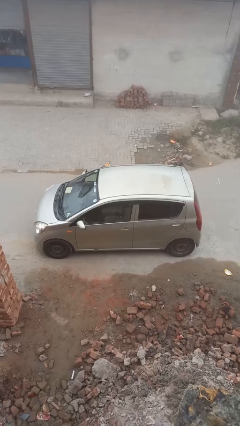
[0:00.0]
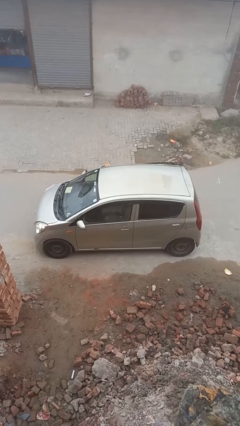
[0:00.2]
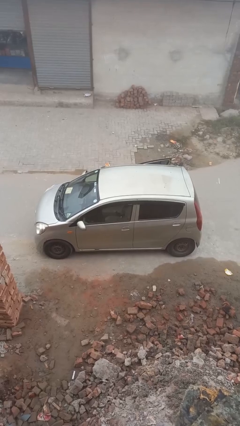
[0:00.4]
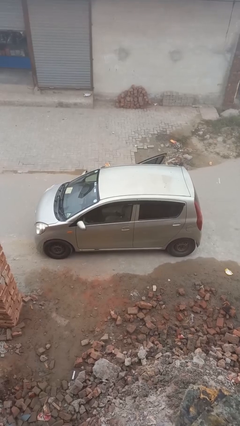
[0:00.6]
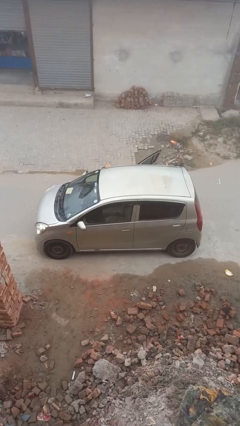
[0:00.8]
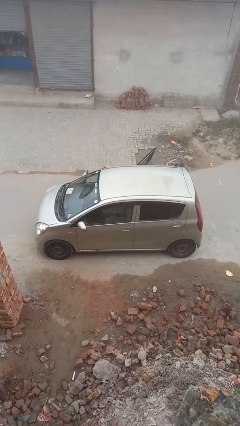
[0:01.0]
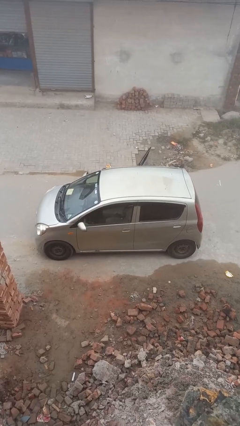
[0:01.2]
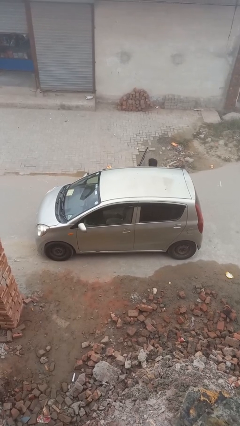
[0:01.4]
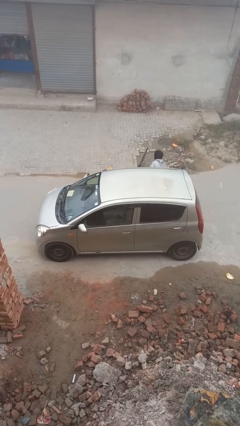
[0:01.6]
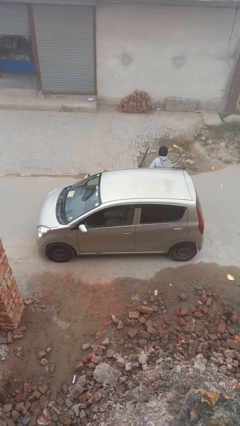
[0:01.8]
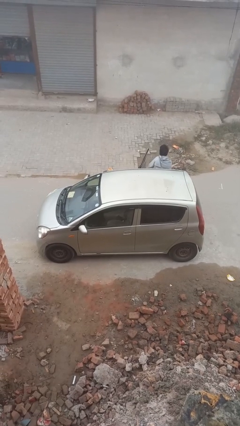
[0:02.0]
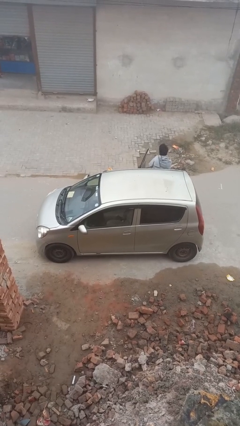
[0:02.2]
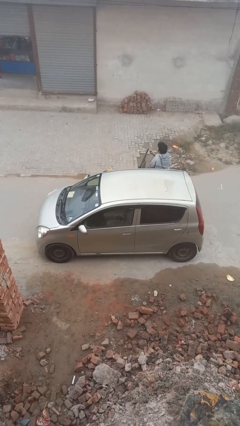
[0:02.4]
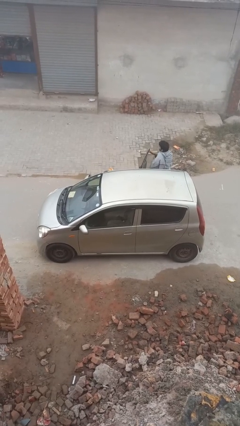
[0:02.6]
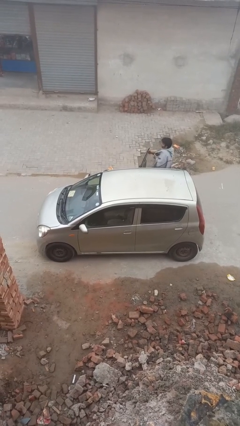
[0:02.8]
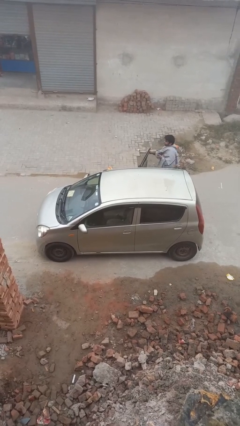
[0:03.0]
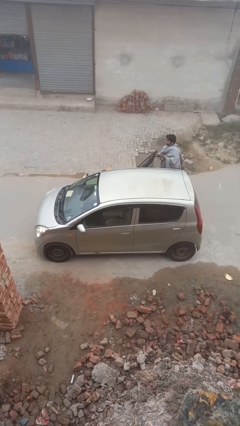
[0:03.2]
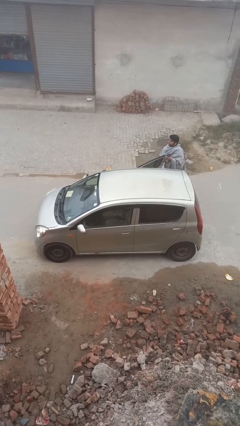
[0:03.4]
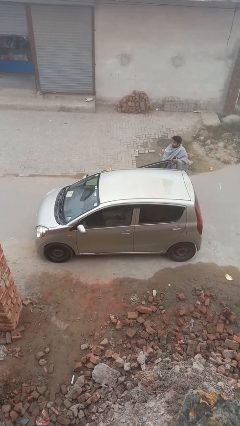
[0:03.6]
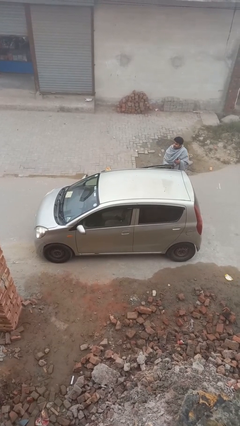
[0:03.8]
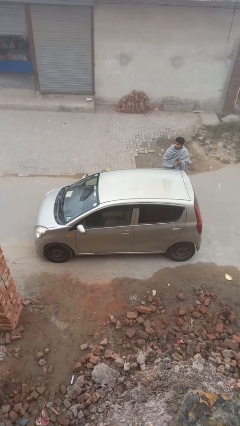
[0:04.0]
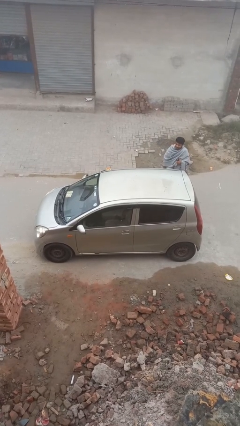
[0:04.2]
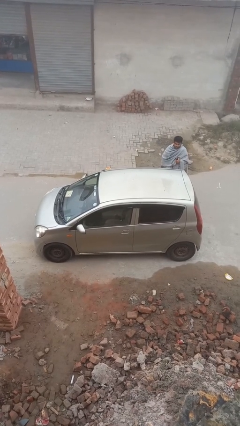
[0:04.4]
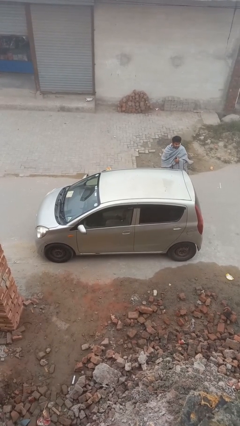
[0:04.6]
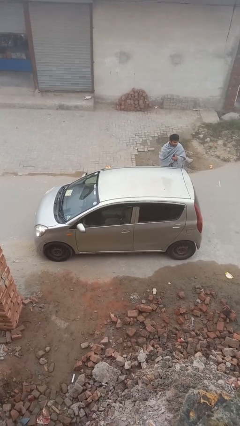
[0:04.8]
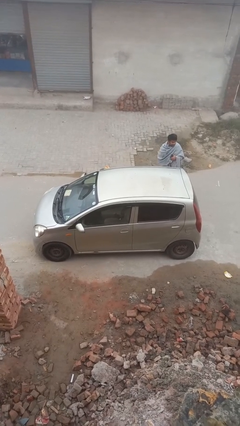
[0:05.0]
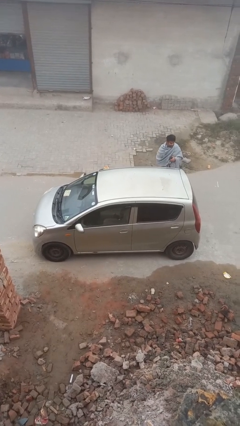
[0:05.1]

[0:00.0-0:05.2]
car drops off person

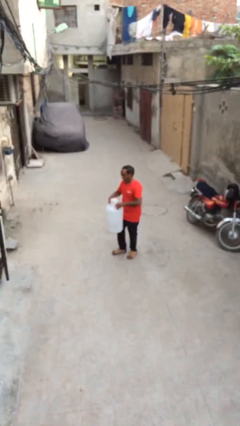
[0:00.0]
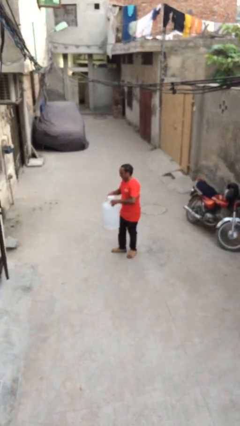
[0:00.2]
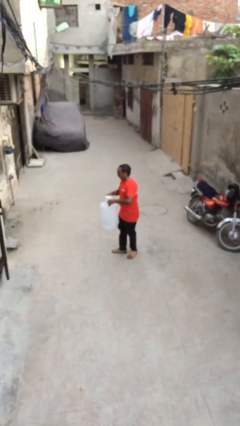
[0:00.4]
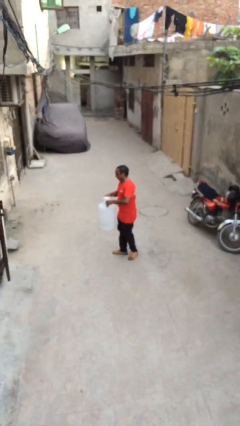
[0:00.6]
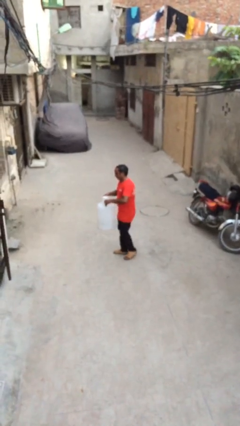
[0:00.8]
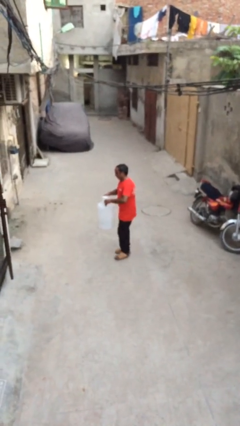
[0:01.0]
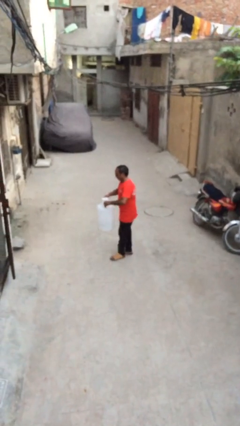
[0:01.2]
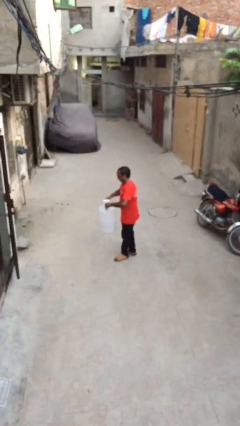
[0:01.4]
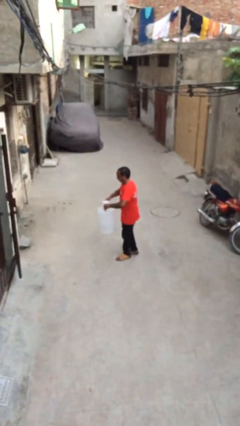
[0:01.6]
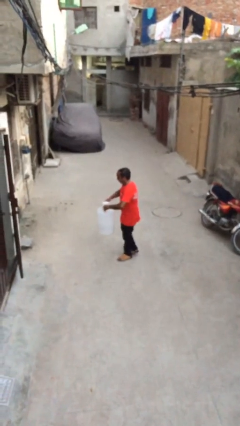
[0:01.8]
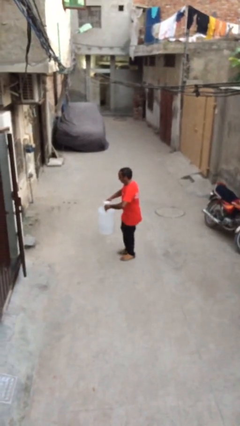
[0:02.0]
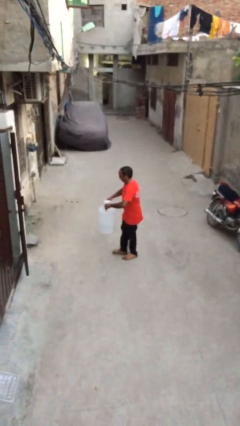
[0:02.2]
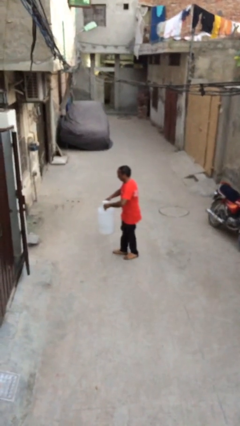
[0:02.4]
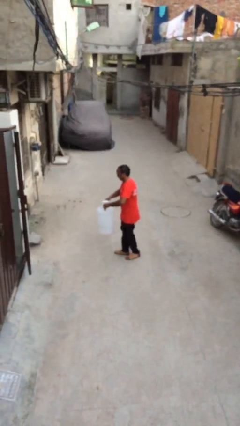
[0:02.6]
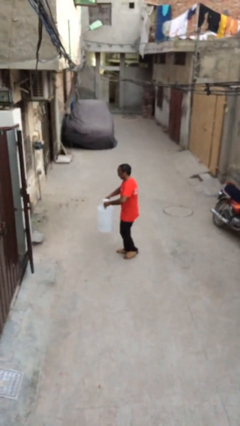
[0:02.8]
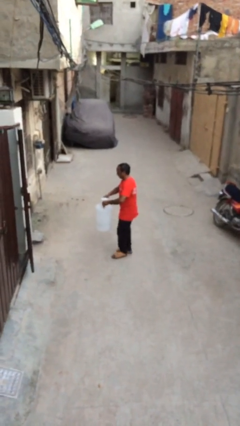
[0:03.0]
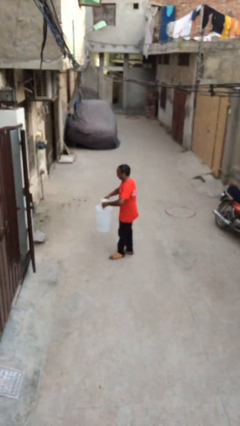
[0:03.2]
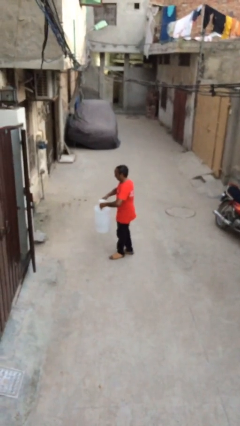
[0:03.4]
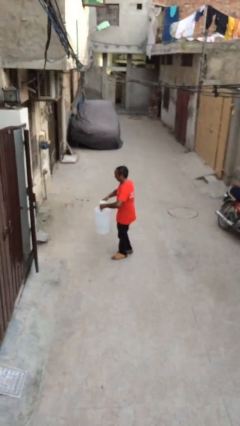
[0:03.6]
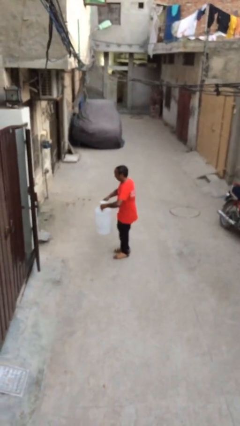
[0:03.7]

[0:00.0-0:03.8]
person carries heavy object

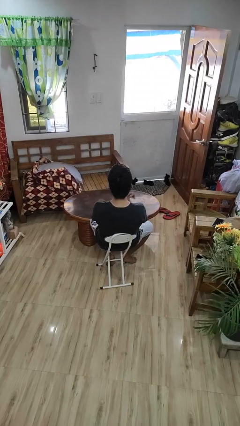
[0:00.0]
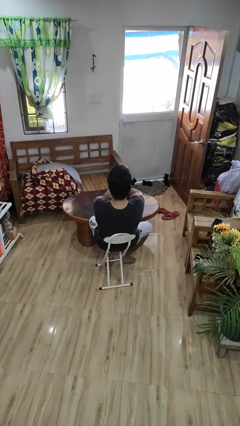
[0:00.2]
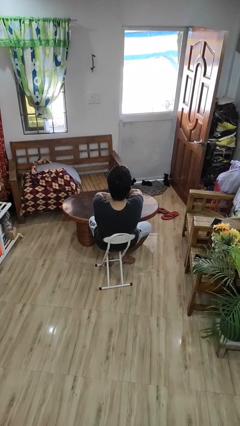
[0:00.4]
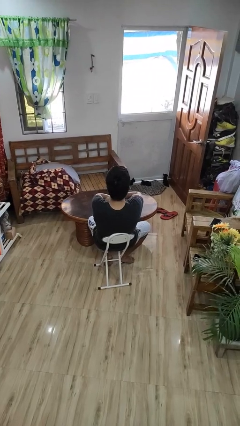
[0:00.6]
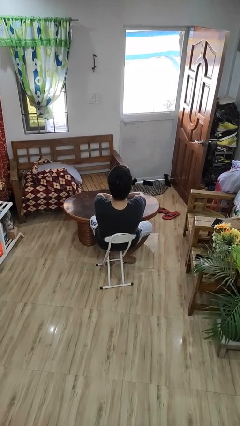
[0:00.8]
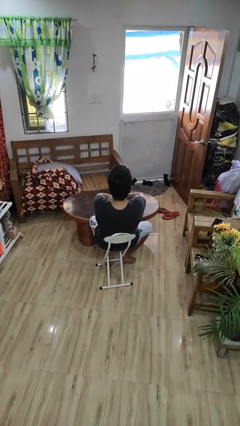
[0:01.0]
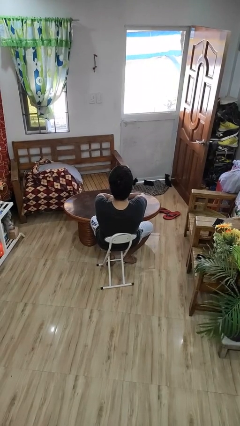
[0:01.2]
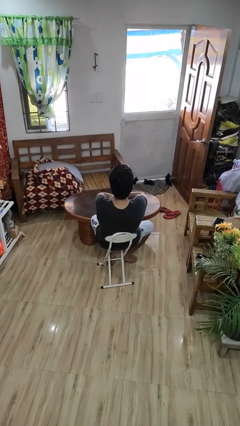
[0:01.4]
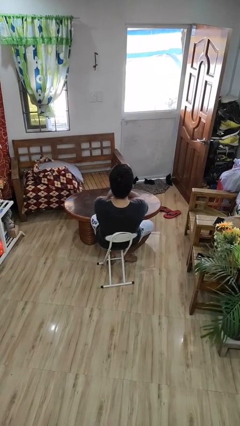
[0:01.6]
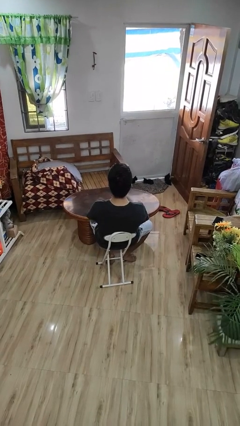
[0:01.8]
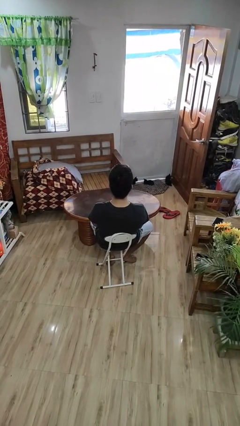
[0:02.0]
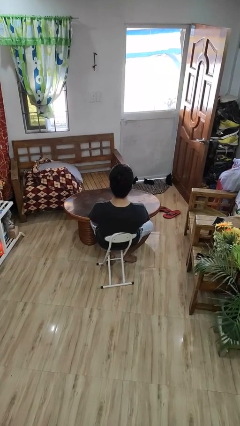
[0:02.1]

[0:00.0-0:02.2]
person crosses arms

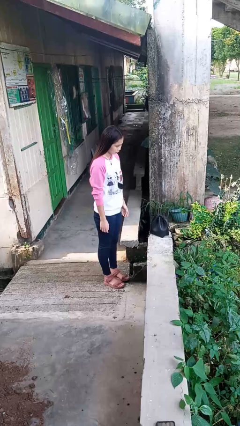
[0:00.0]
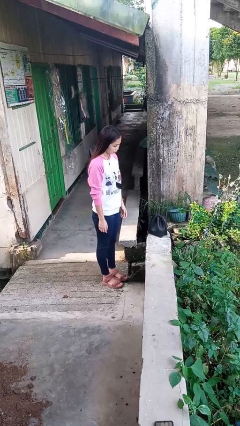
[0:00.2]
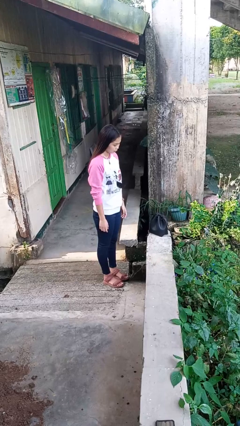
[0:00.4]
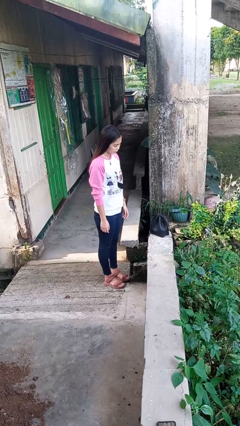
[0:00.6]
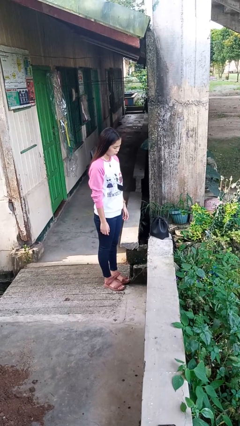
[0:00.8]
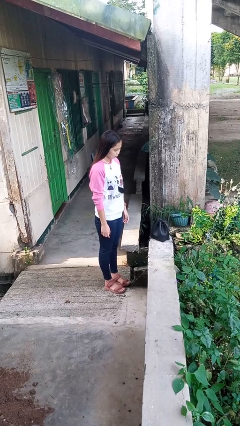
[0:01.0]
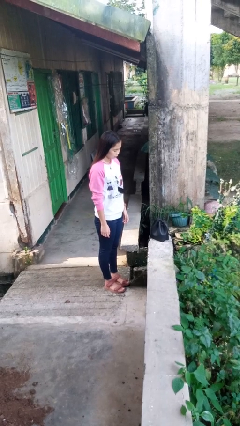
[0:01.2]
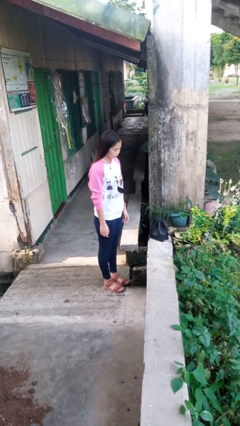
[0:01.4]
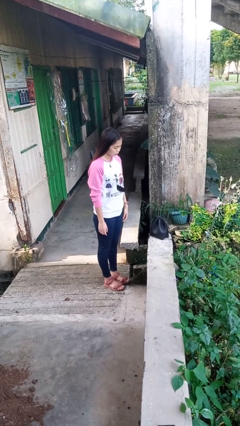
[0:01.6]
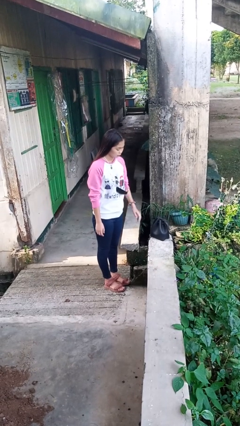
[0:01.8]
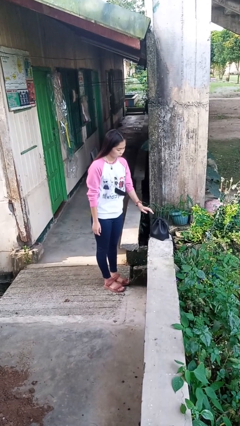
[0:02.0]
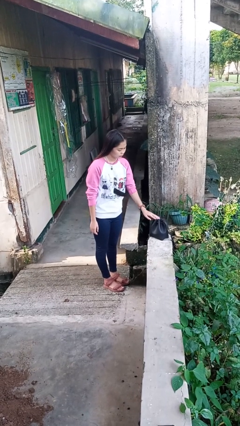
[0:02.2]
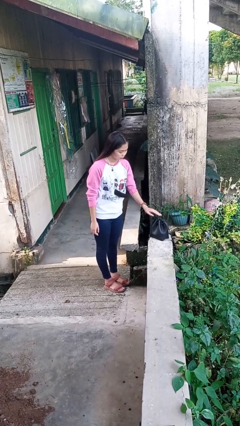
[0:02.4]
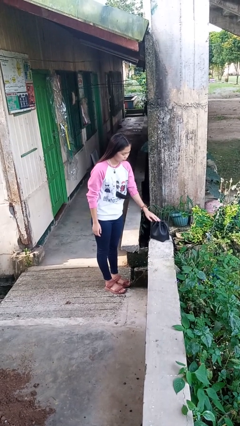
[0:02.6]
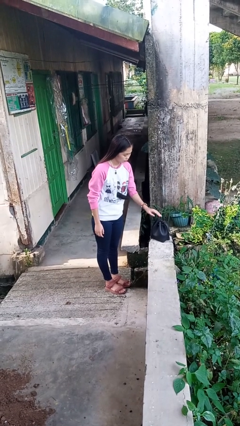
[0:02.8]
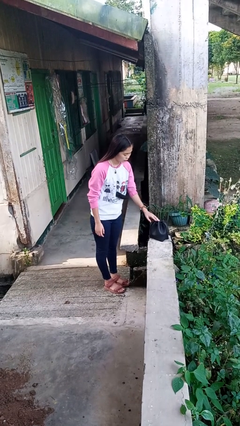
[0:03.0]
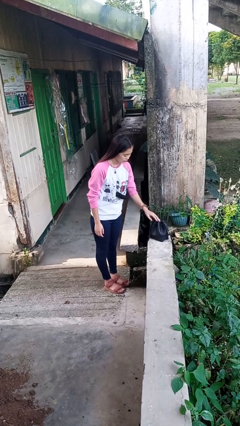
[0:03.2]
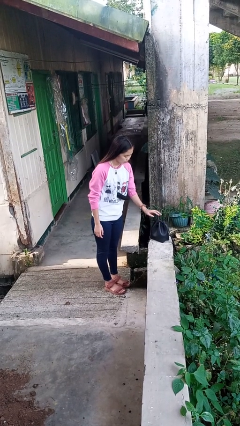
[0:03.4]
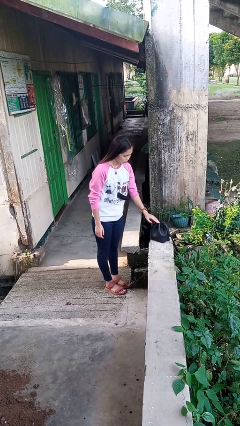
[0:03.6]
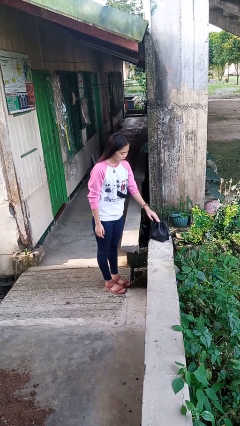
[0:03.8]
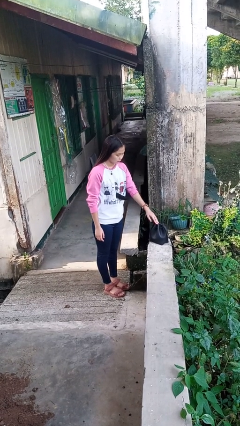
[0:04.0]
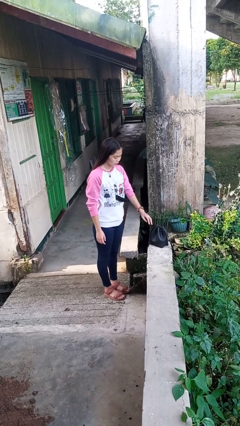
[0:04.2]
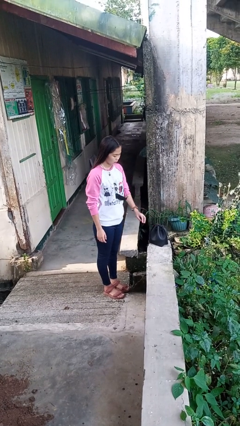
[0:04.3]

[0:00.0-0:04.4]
person taps object with finger

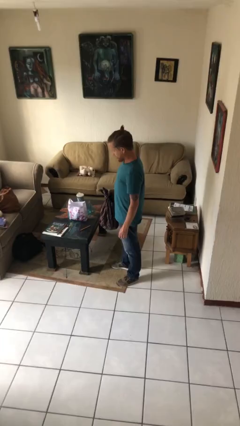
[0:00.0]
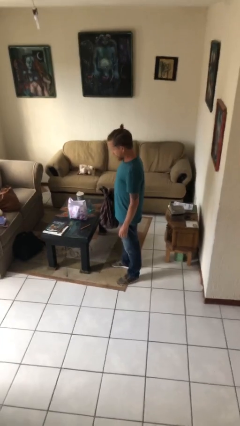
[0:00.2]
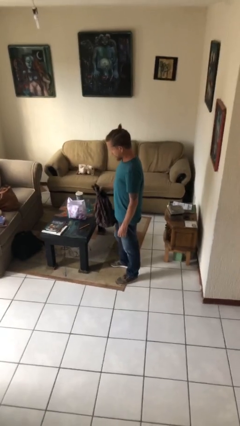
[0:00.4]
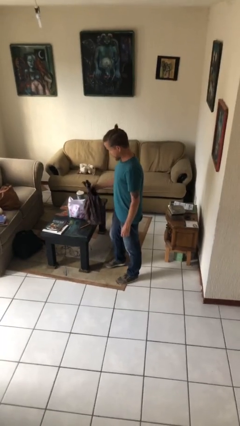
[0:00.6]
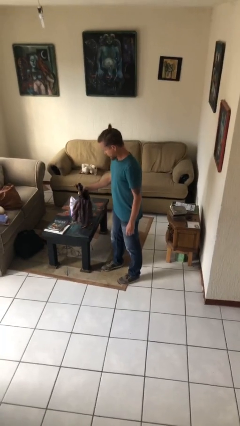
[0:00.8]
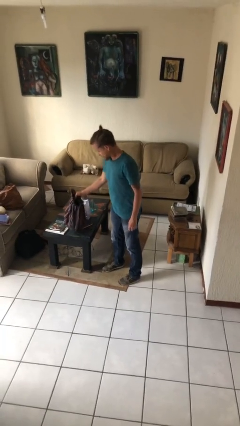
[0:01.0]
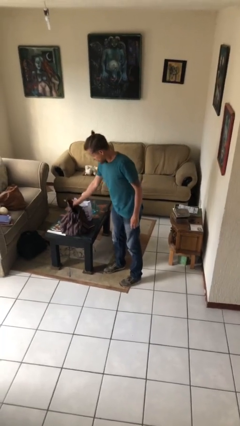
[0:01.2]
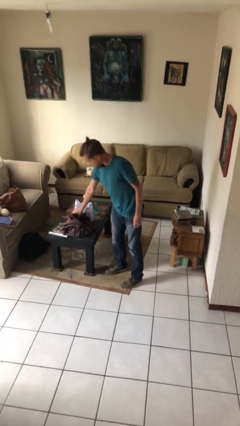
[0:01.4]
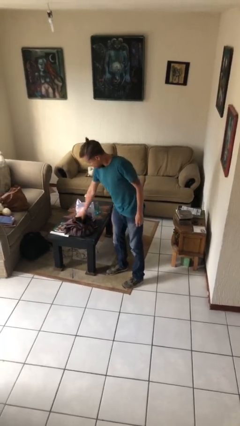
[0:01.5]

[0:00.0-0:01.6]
person puts down object on table

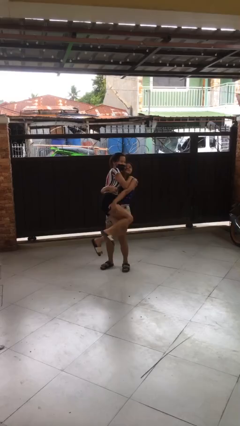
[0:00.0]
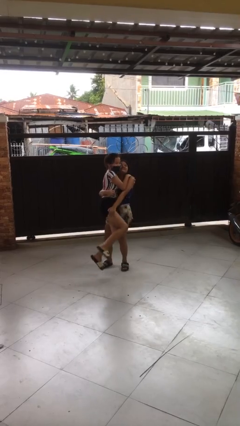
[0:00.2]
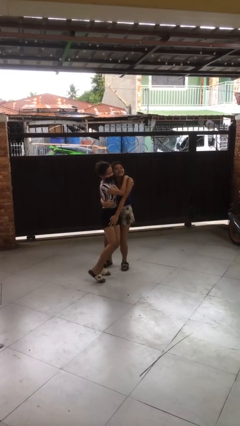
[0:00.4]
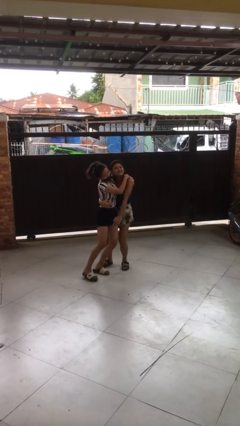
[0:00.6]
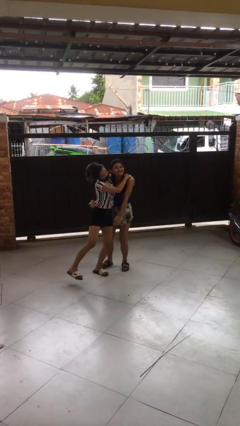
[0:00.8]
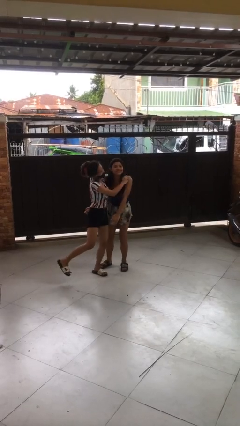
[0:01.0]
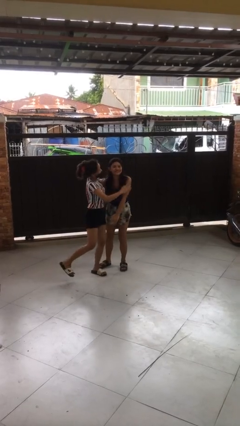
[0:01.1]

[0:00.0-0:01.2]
person puts down person
